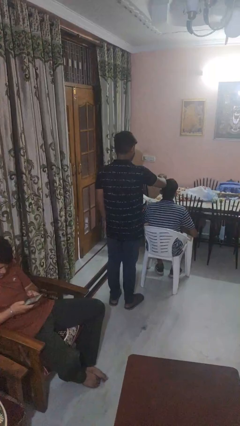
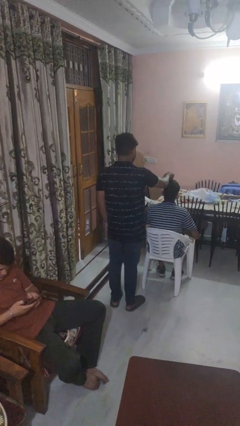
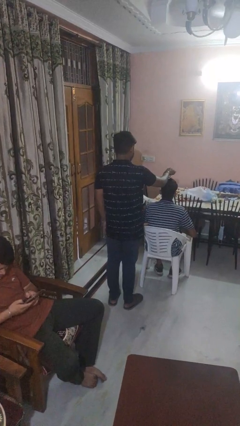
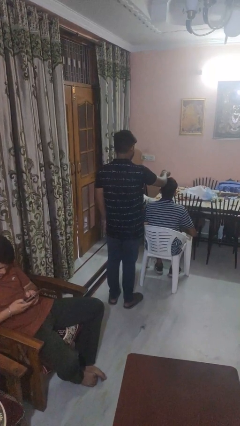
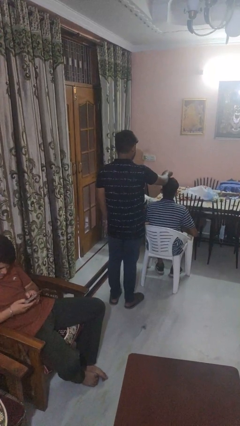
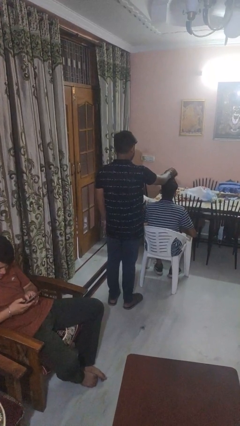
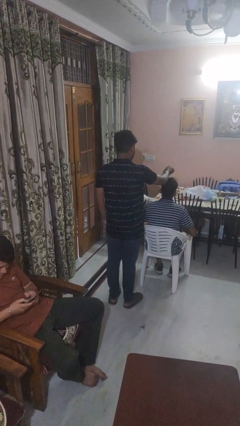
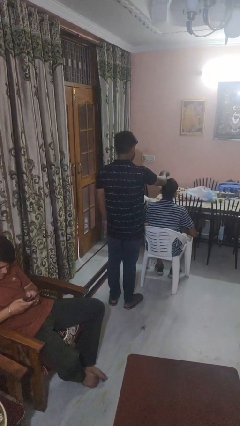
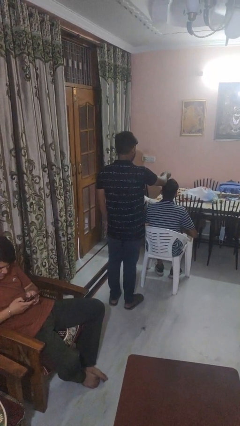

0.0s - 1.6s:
person brushes hair of person

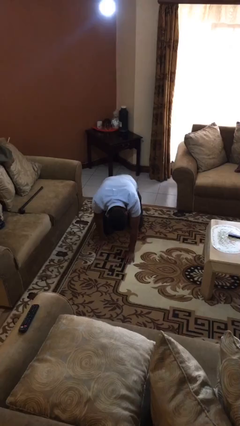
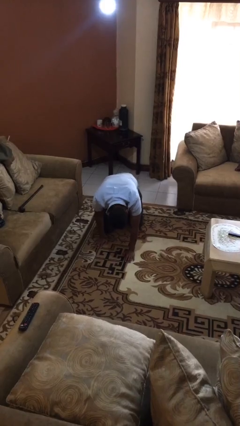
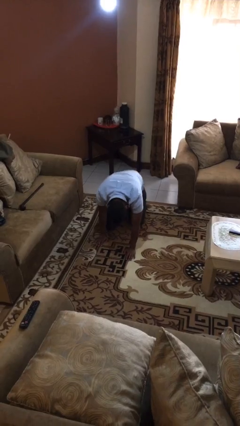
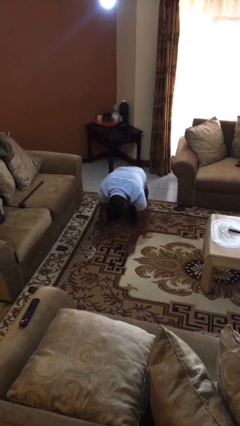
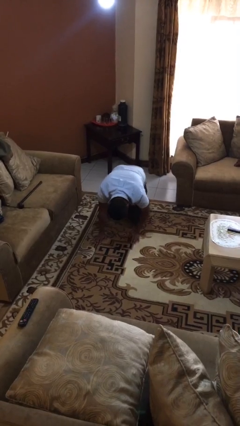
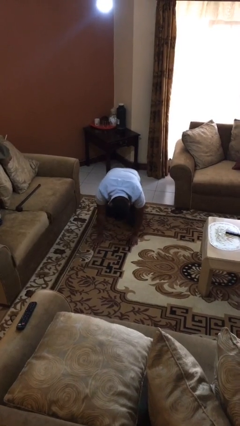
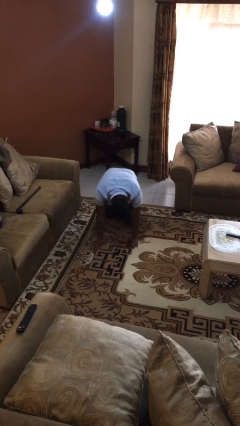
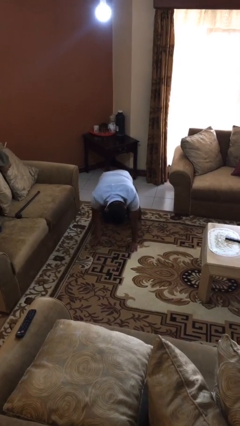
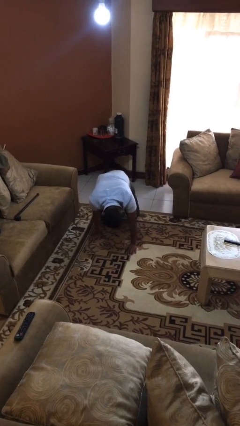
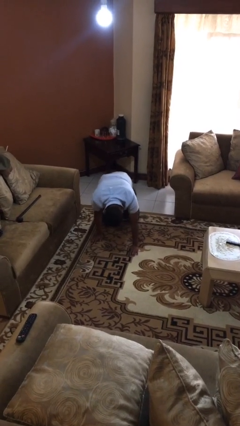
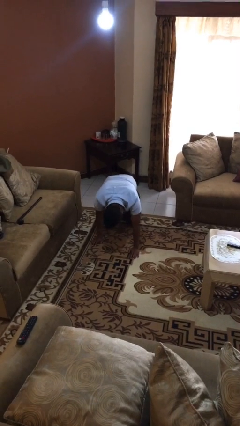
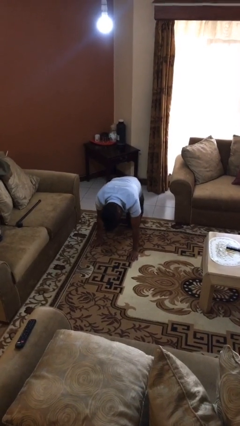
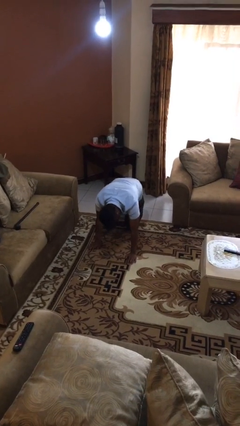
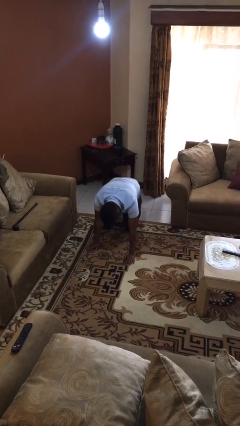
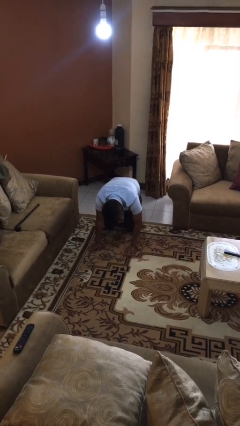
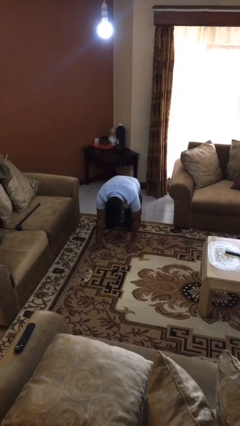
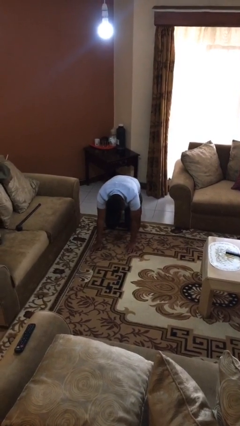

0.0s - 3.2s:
person crawls

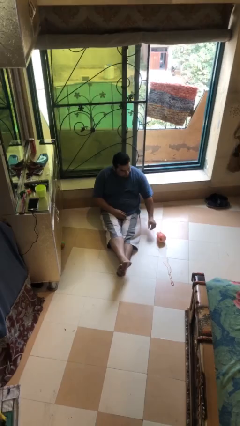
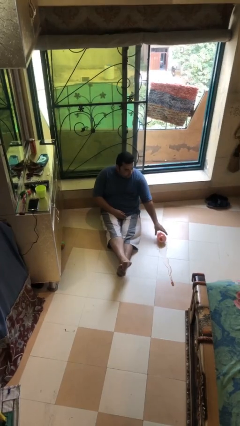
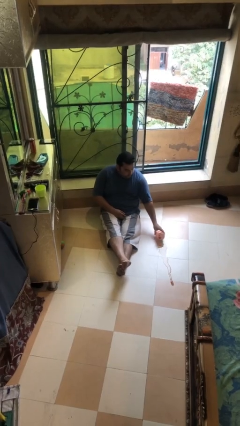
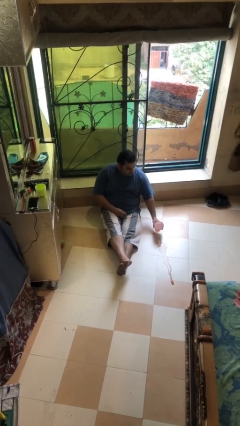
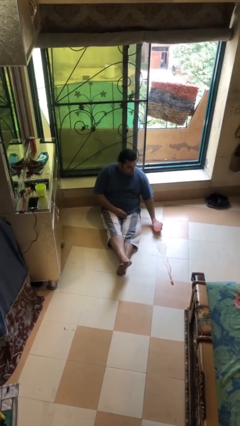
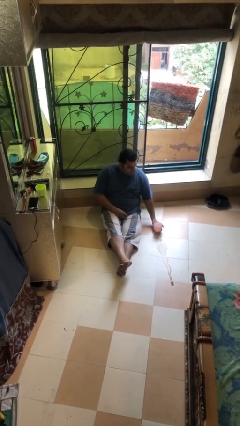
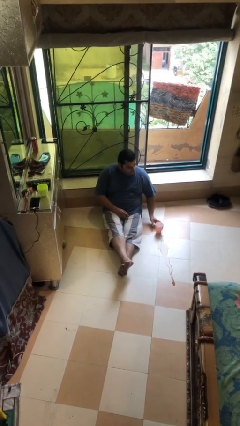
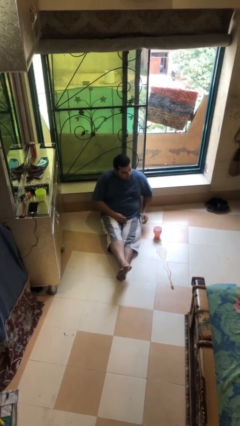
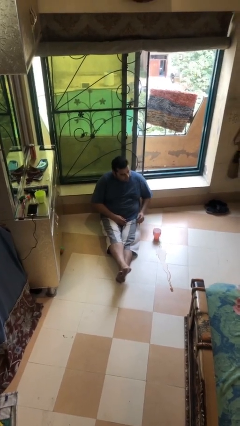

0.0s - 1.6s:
person sets upright glass

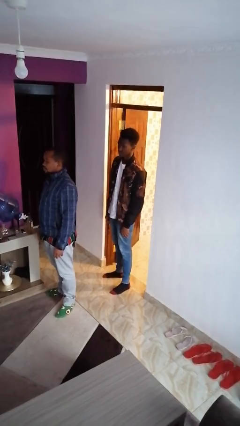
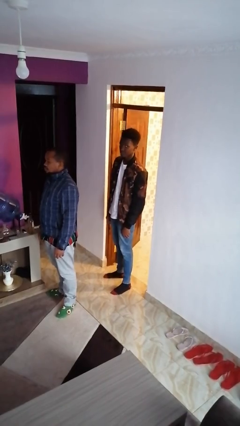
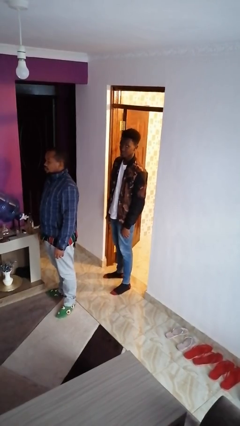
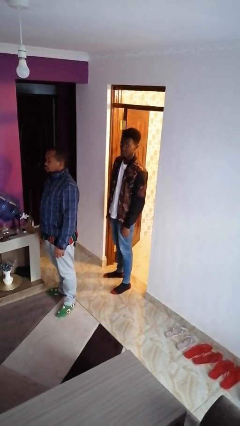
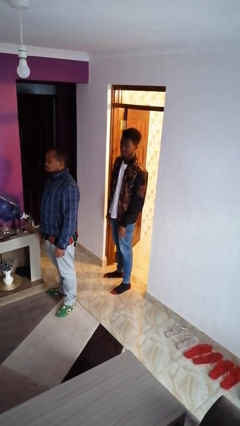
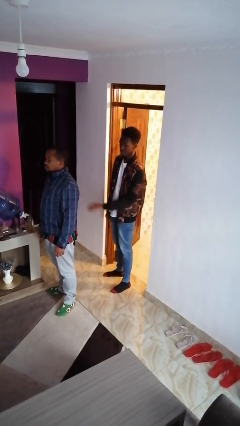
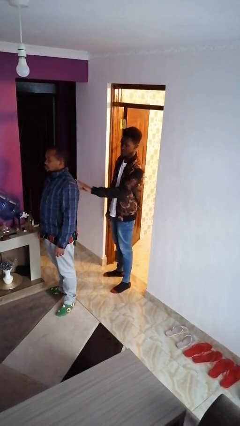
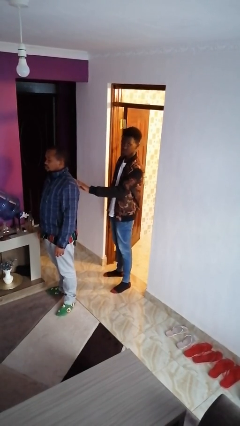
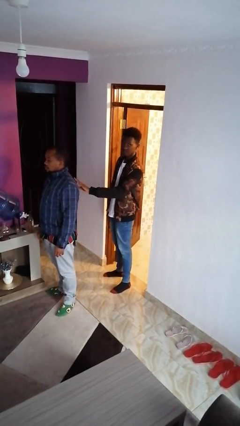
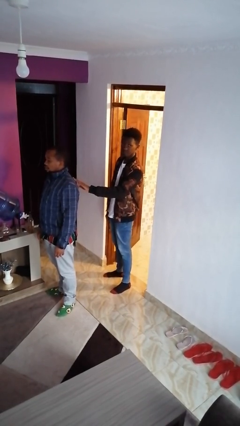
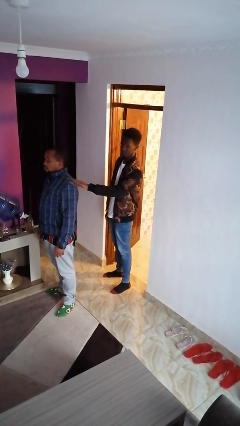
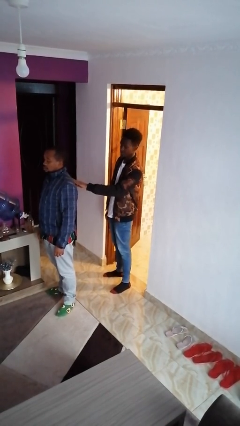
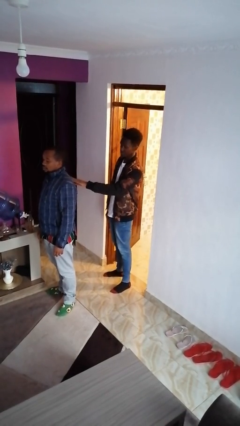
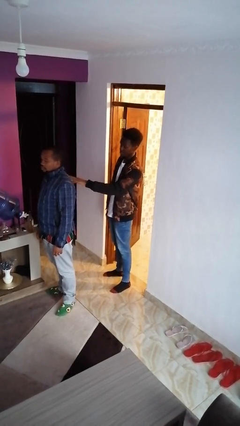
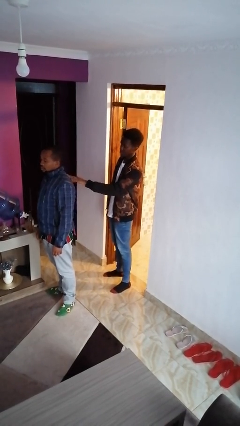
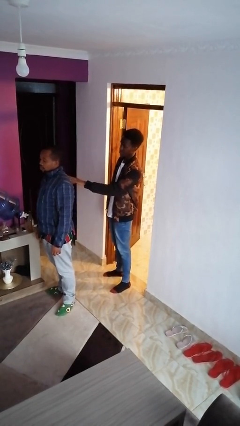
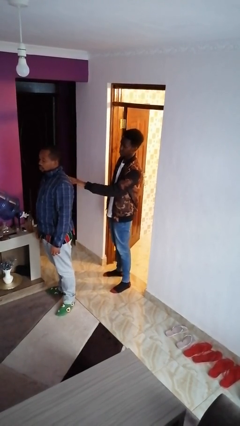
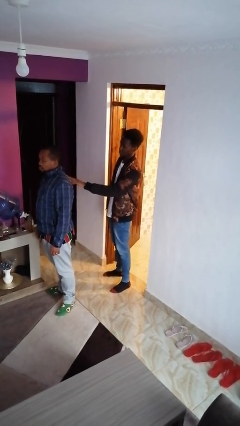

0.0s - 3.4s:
person touches back of person

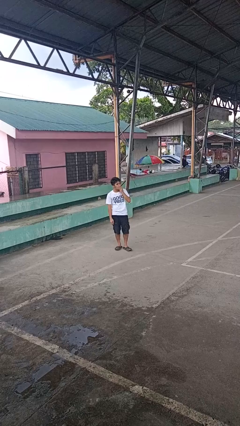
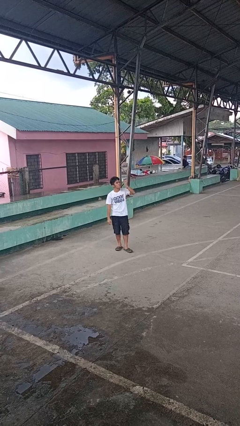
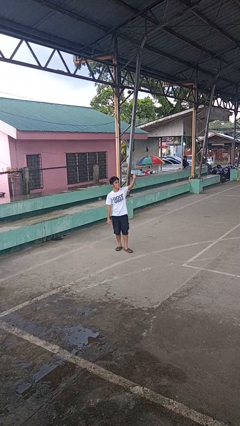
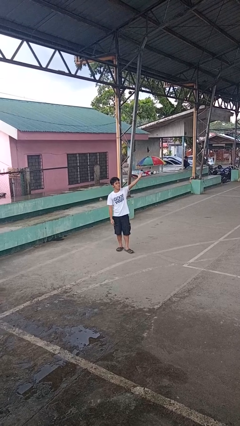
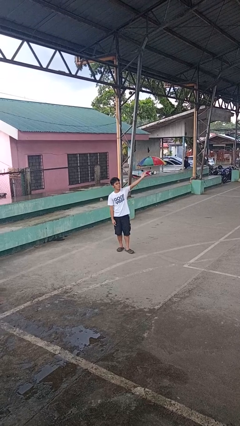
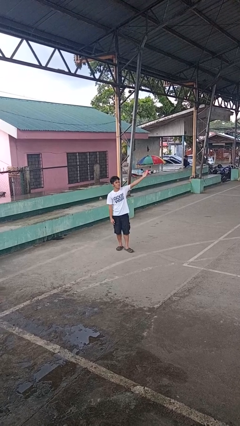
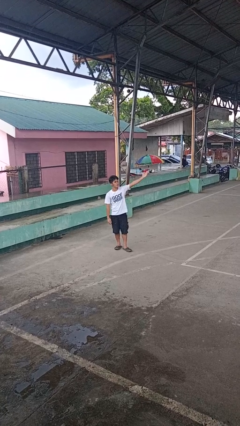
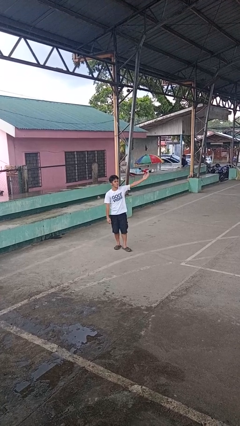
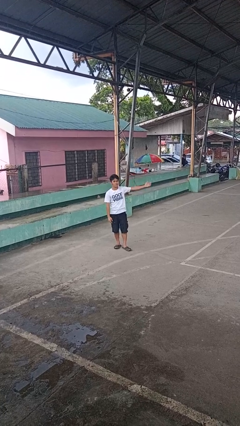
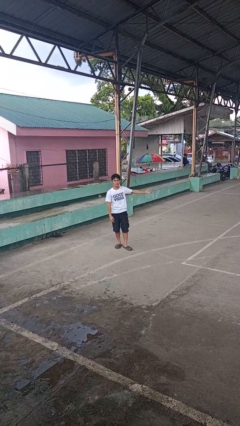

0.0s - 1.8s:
person gestures blow kiss

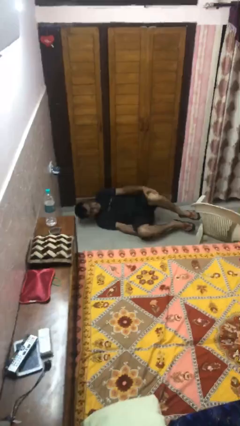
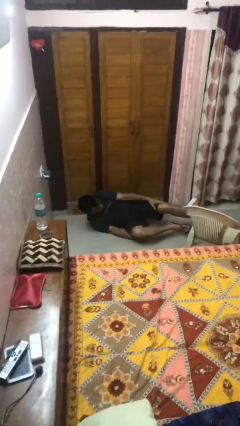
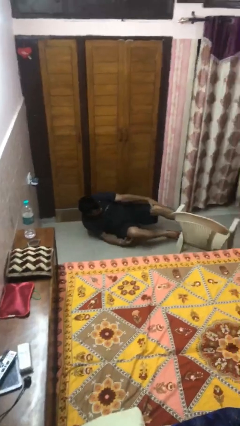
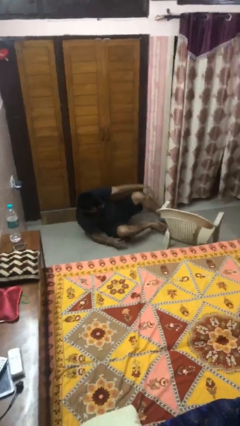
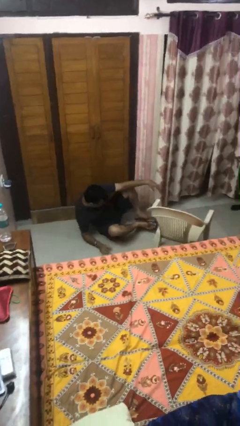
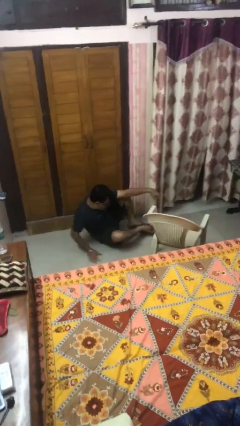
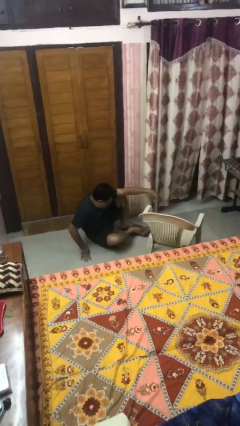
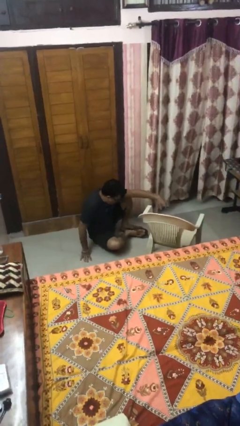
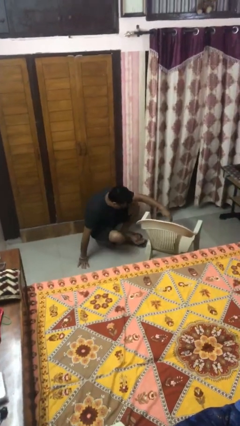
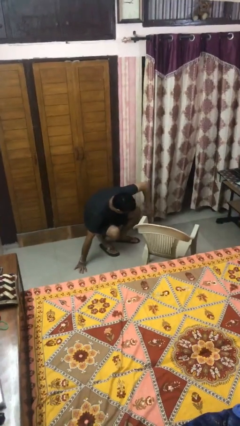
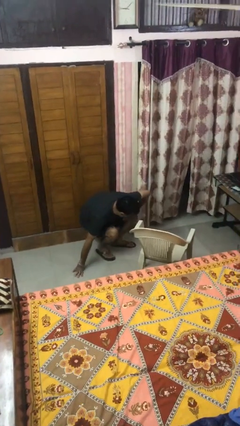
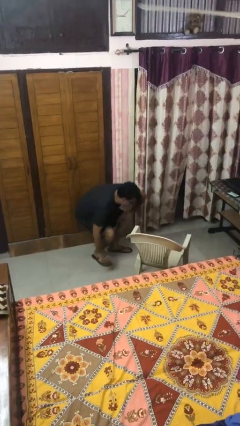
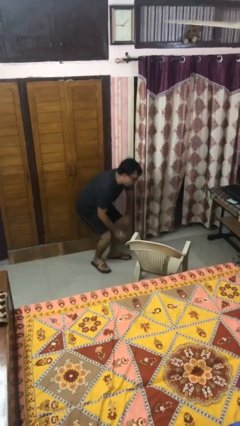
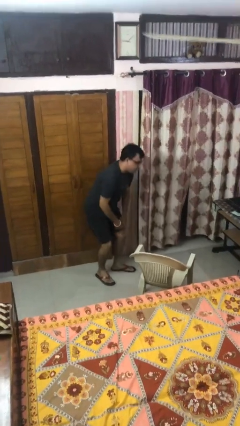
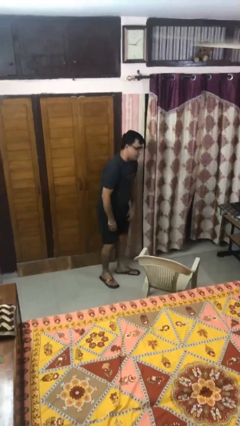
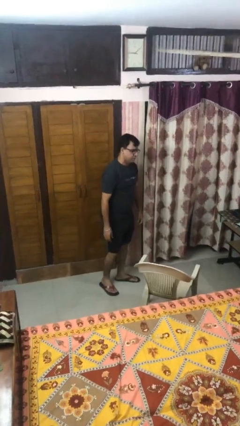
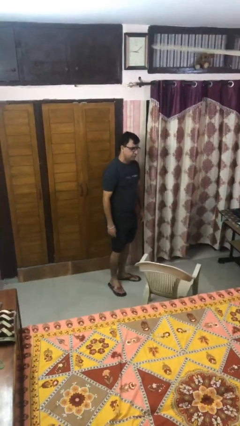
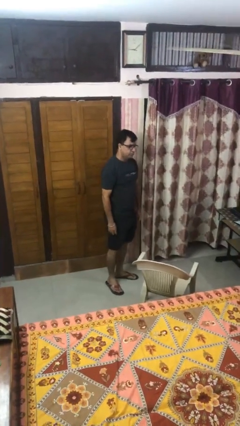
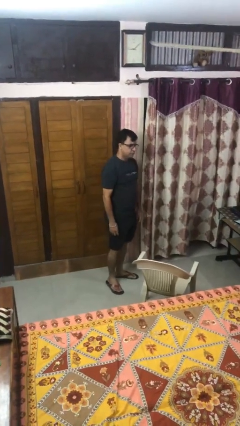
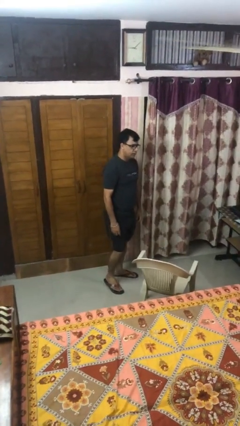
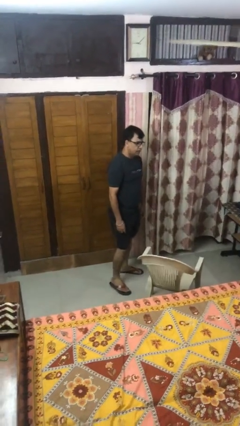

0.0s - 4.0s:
person stands up from floor

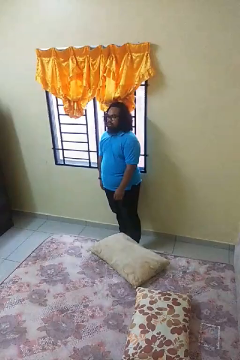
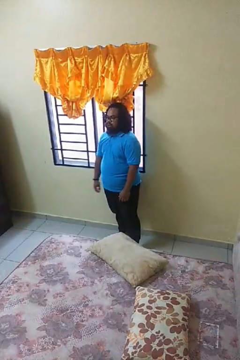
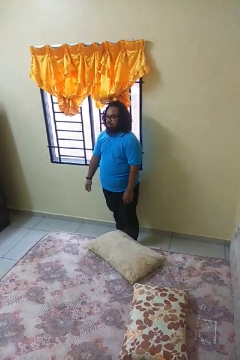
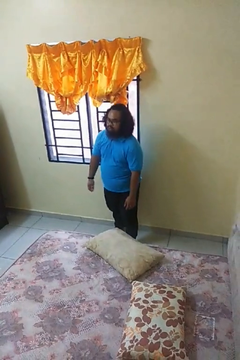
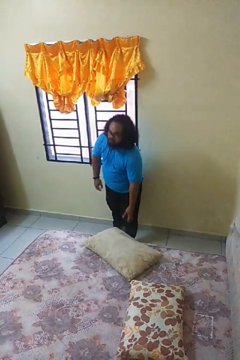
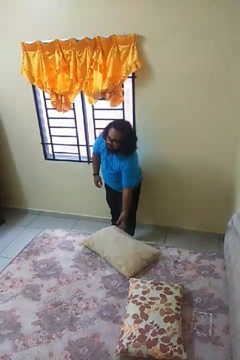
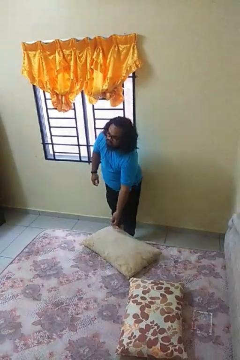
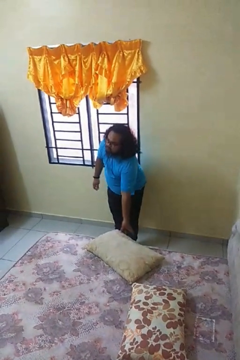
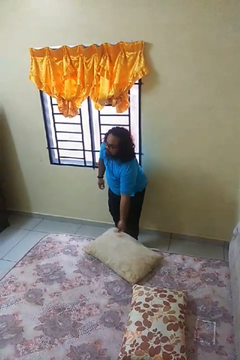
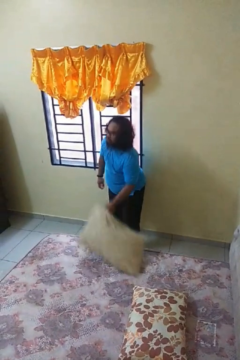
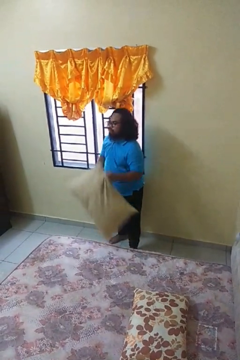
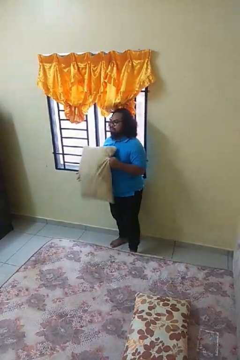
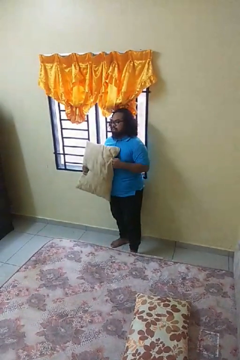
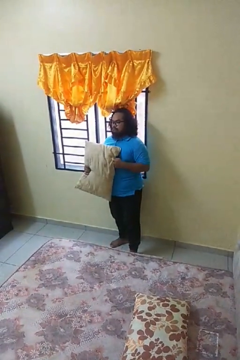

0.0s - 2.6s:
person picks up object from bed
